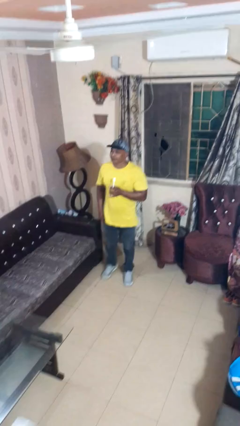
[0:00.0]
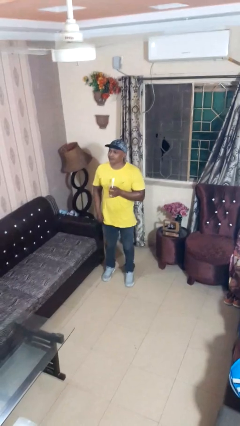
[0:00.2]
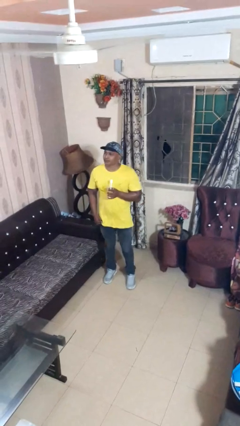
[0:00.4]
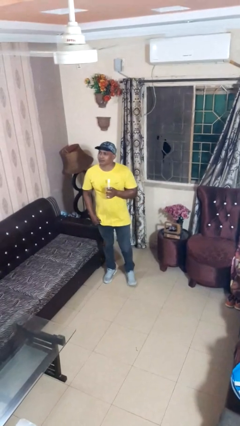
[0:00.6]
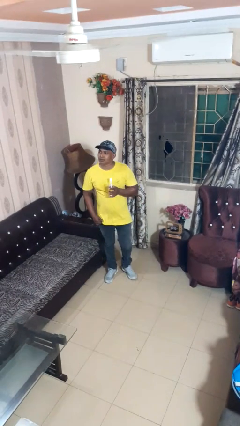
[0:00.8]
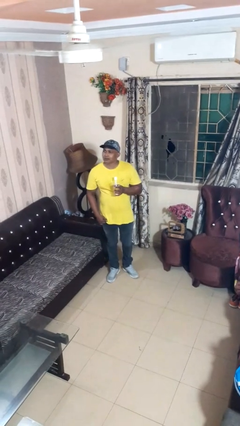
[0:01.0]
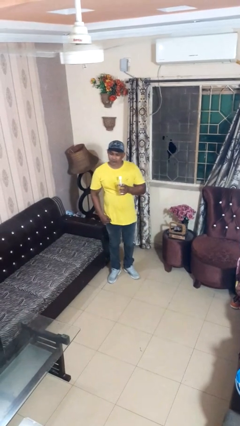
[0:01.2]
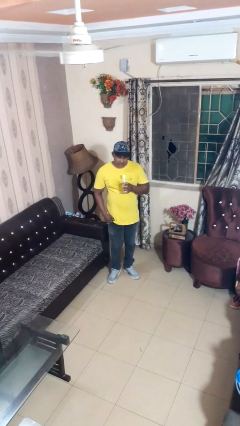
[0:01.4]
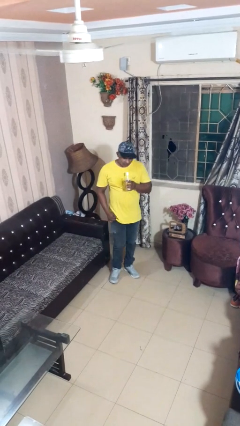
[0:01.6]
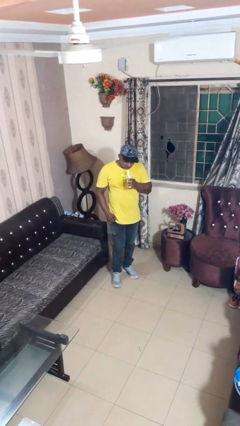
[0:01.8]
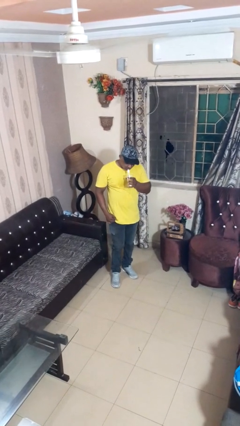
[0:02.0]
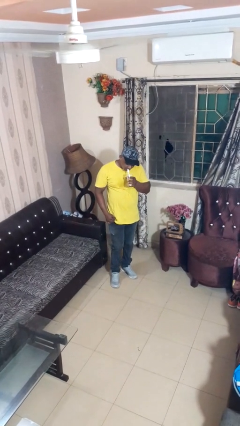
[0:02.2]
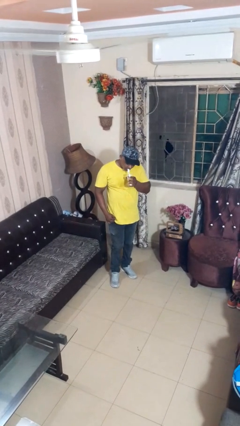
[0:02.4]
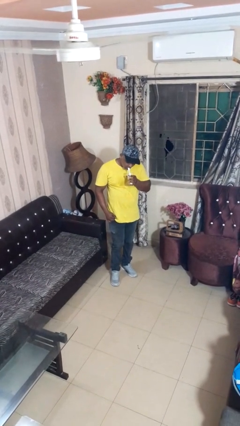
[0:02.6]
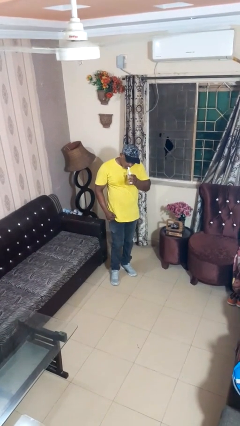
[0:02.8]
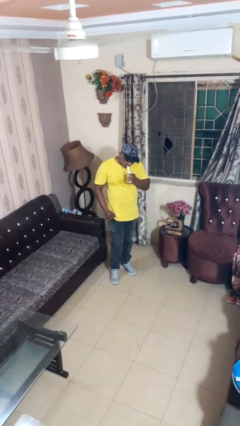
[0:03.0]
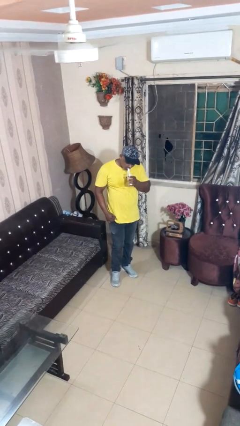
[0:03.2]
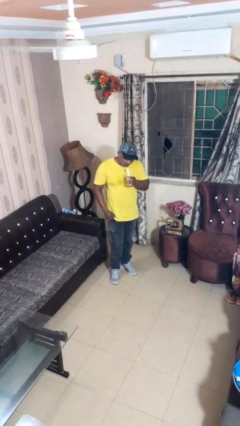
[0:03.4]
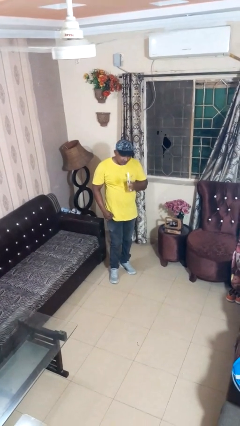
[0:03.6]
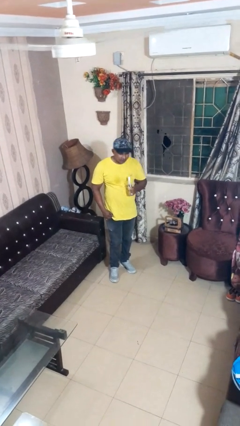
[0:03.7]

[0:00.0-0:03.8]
person drinks from straw

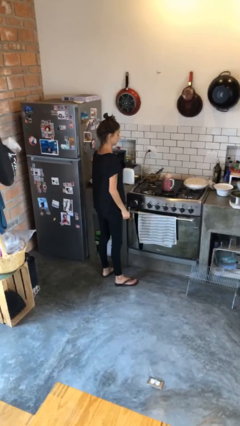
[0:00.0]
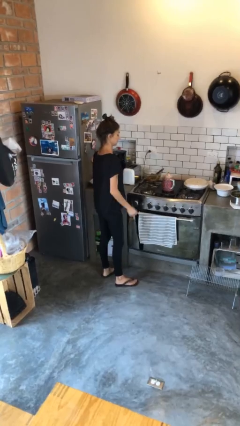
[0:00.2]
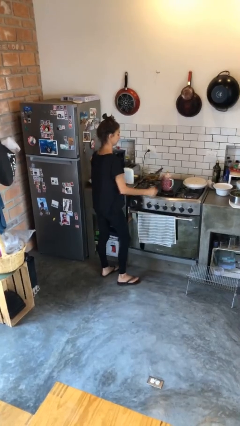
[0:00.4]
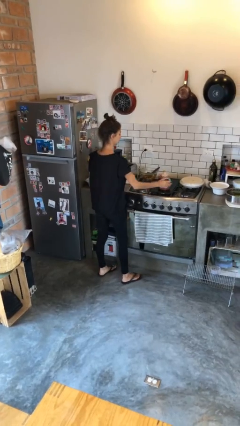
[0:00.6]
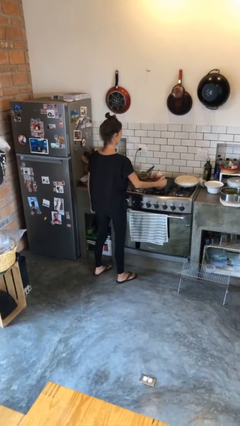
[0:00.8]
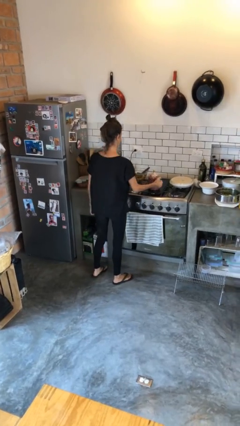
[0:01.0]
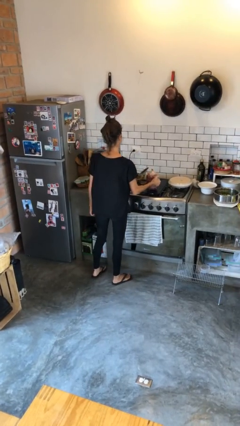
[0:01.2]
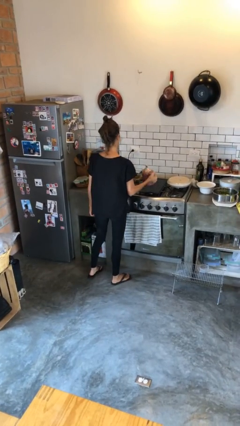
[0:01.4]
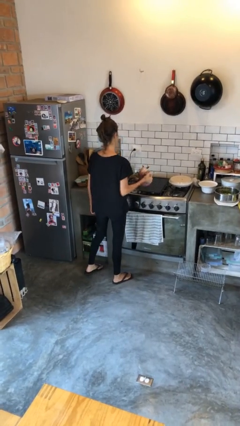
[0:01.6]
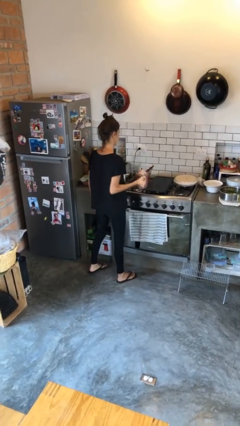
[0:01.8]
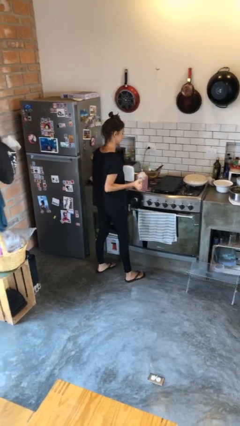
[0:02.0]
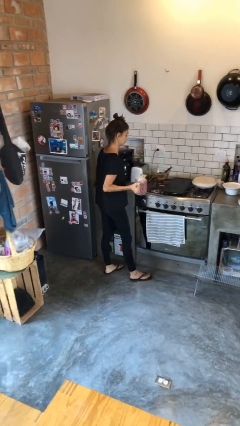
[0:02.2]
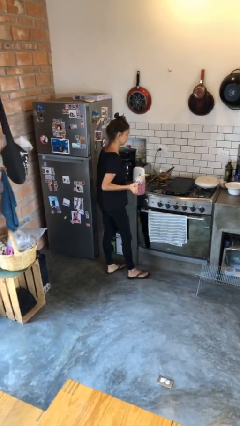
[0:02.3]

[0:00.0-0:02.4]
person picks up object from countertop

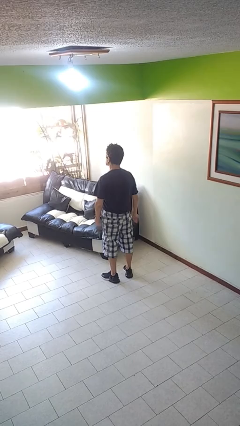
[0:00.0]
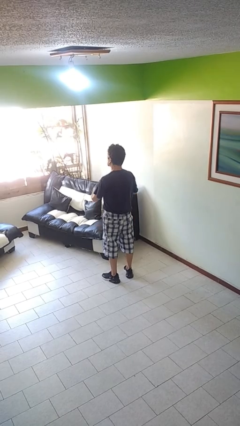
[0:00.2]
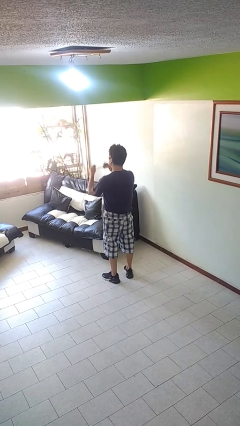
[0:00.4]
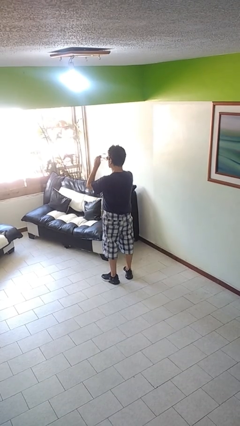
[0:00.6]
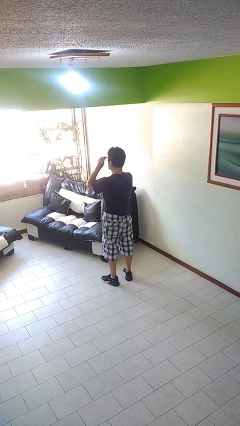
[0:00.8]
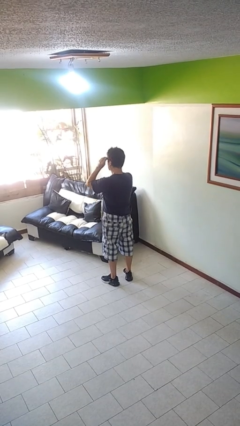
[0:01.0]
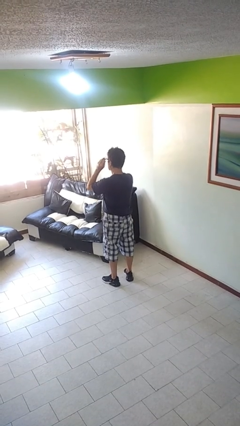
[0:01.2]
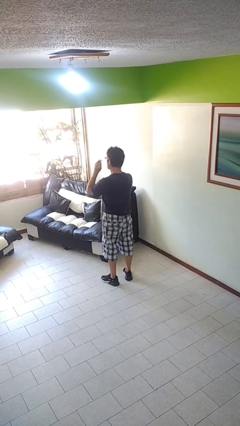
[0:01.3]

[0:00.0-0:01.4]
person puts on glasses

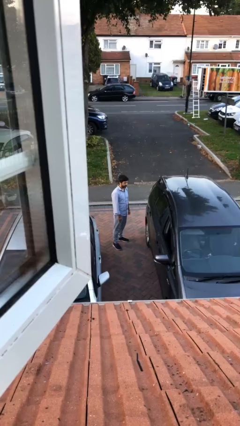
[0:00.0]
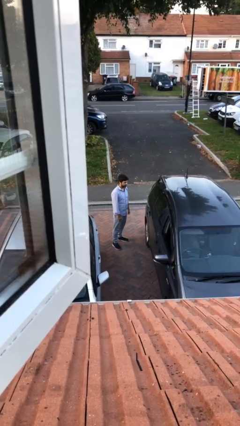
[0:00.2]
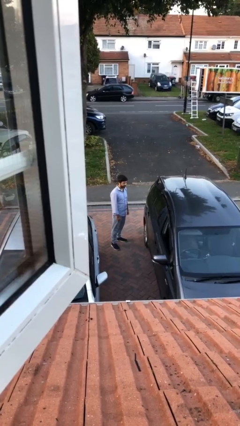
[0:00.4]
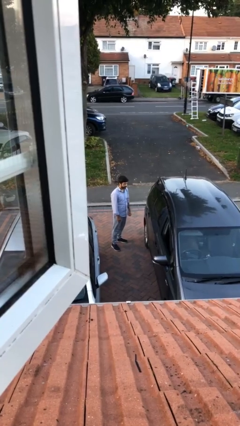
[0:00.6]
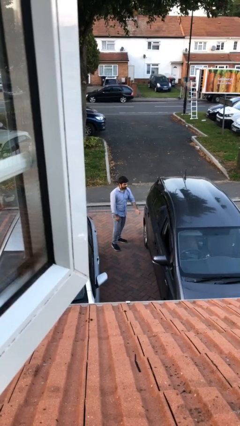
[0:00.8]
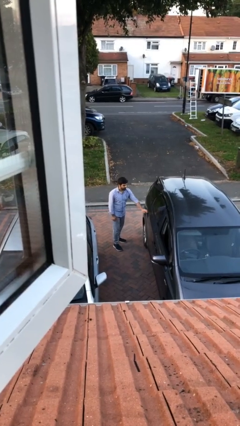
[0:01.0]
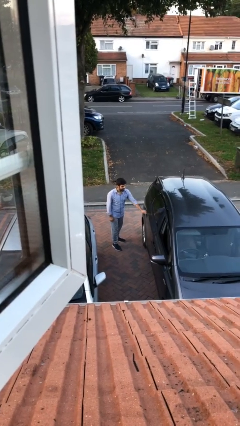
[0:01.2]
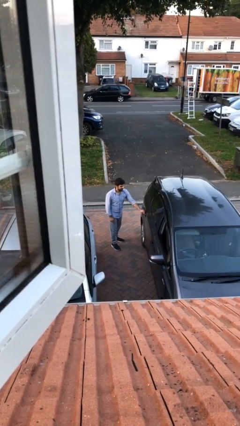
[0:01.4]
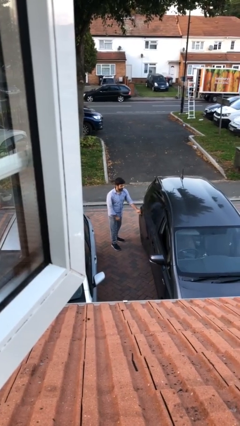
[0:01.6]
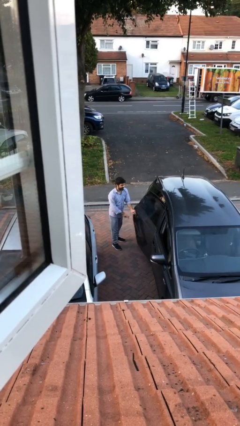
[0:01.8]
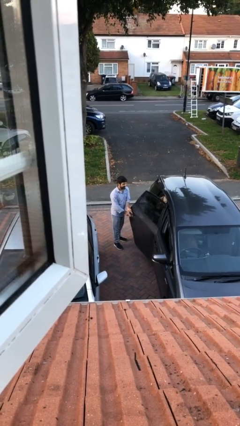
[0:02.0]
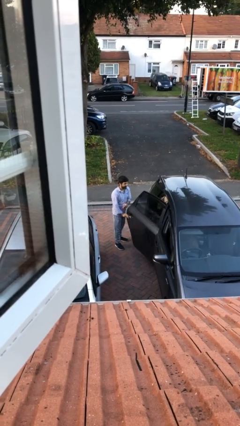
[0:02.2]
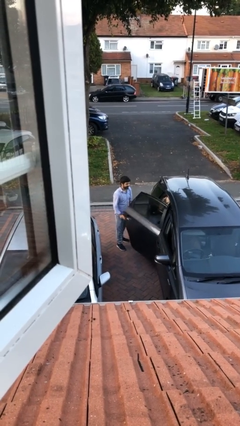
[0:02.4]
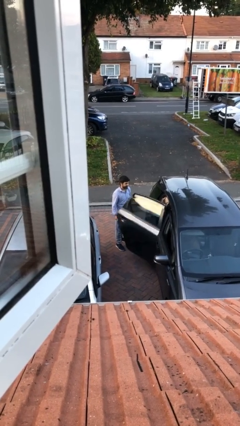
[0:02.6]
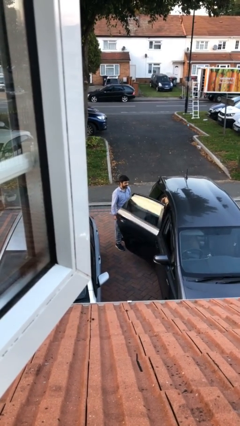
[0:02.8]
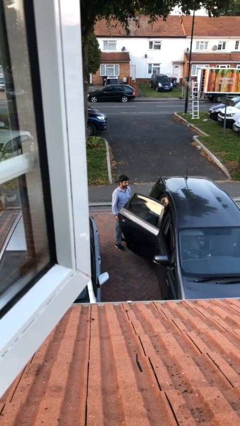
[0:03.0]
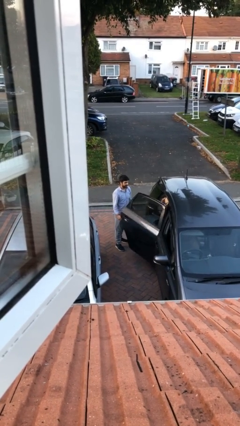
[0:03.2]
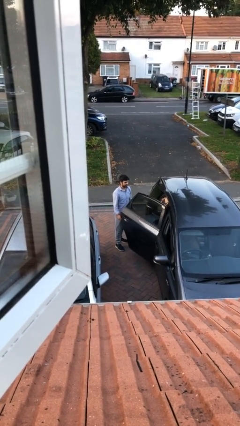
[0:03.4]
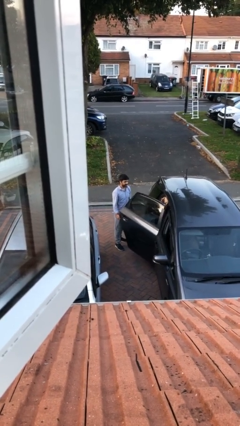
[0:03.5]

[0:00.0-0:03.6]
person opens car door

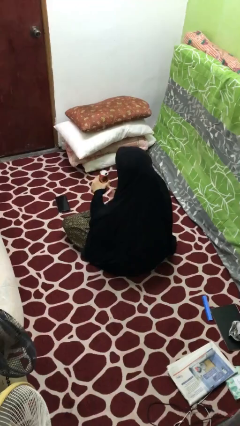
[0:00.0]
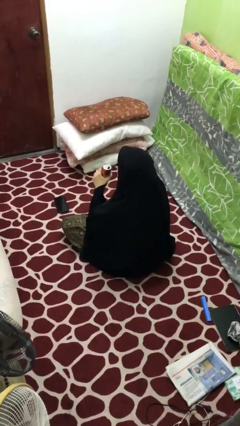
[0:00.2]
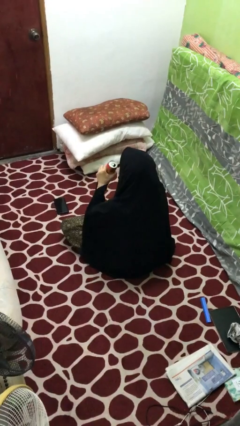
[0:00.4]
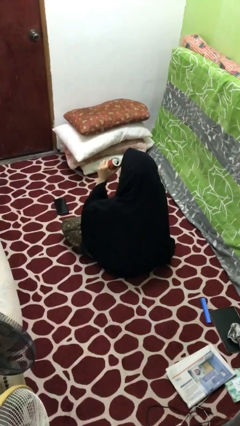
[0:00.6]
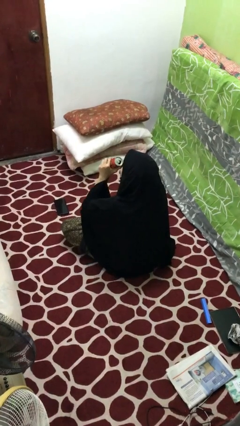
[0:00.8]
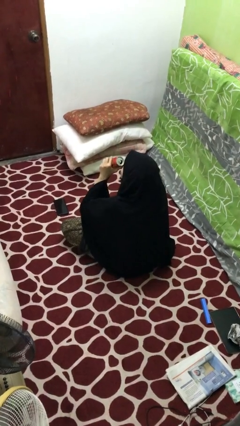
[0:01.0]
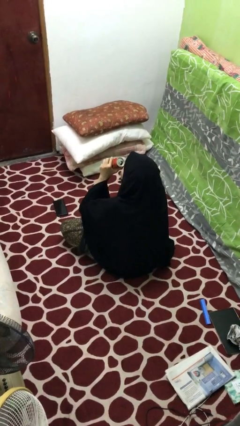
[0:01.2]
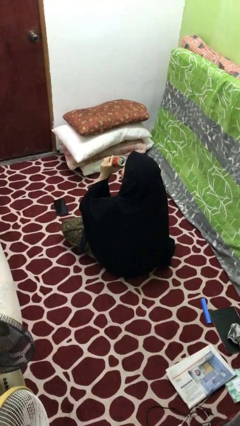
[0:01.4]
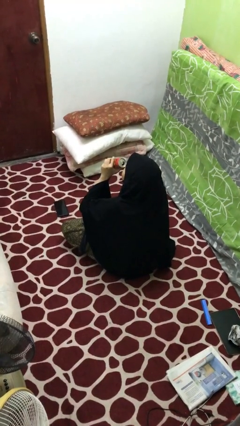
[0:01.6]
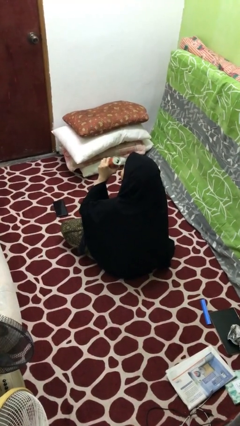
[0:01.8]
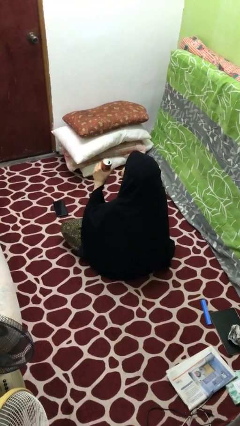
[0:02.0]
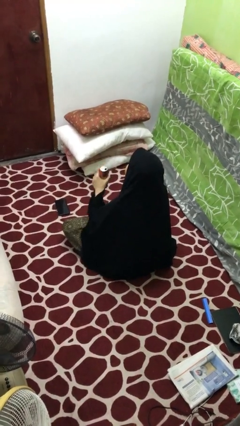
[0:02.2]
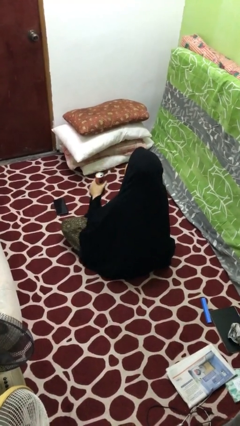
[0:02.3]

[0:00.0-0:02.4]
person drinks from beverage can

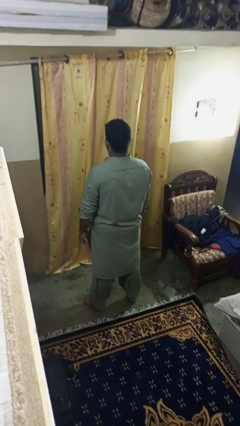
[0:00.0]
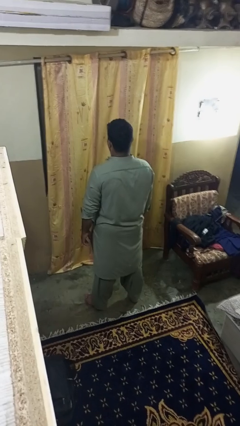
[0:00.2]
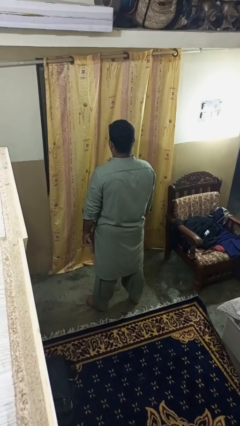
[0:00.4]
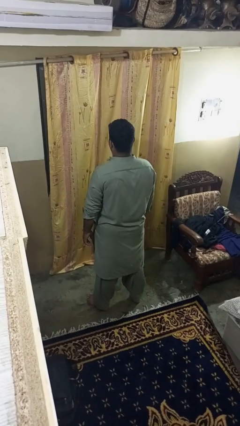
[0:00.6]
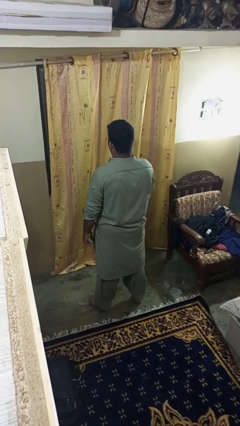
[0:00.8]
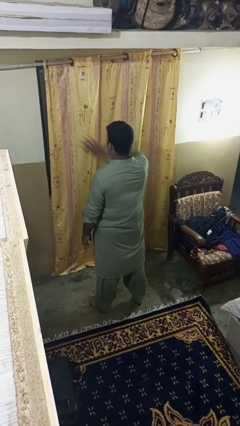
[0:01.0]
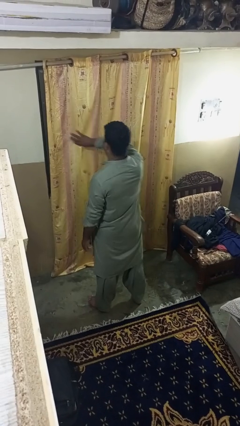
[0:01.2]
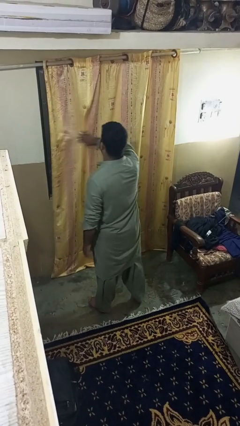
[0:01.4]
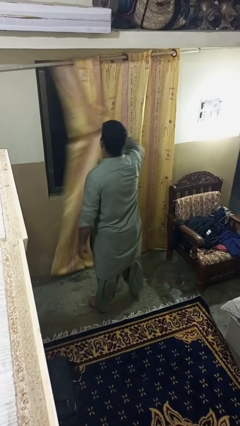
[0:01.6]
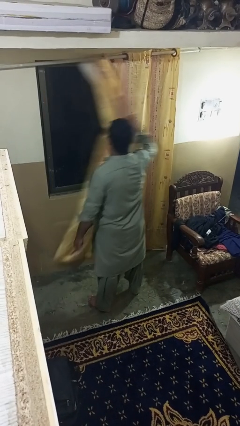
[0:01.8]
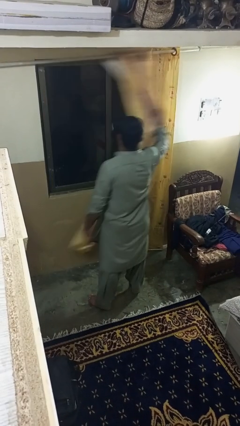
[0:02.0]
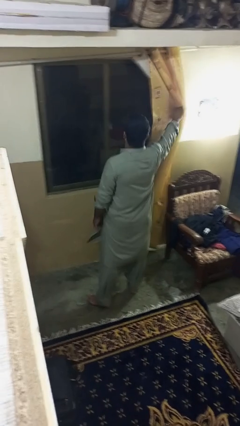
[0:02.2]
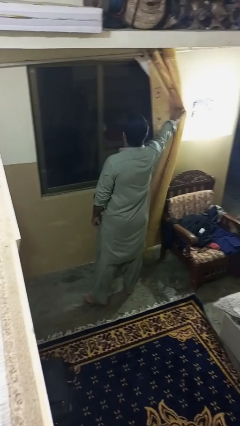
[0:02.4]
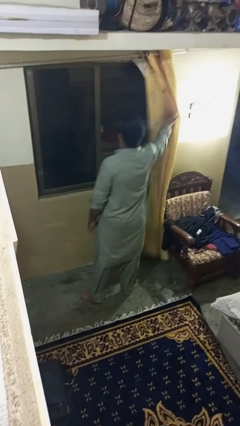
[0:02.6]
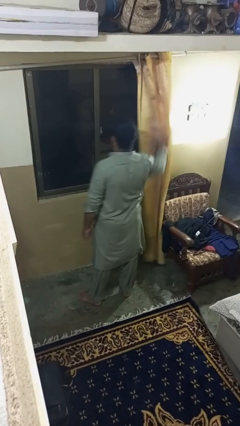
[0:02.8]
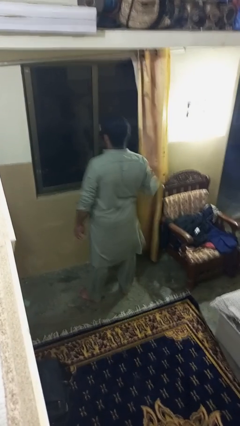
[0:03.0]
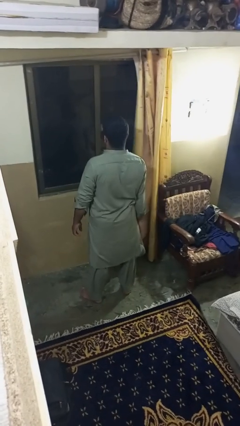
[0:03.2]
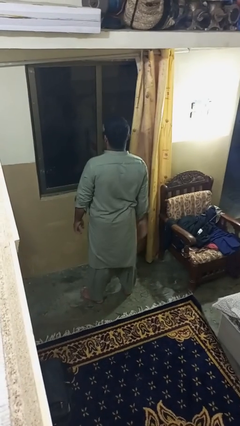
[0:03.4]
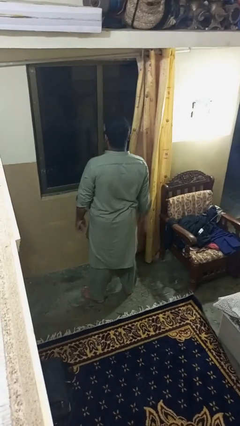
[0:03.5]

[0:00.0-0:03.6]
person opens curtains
